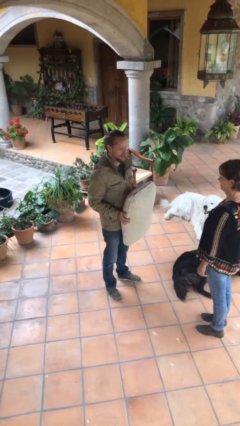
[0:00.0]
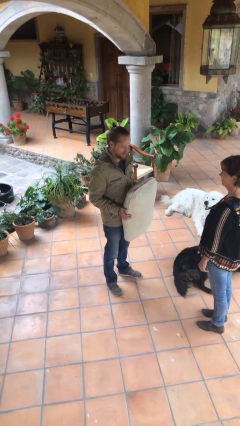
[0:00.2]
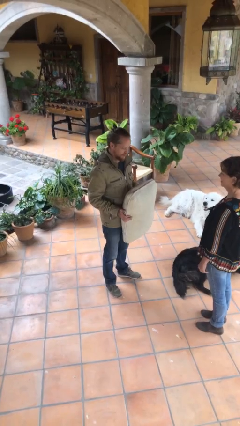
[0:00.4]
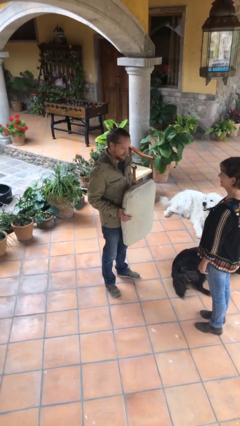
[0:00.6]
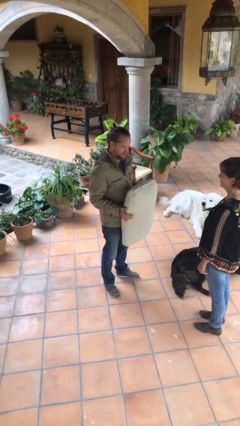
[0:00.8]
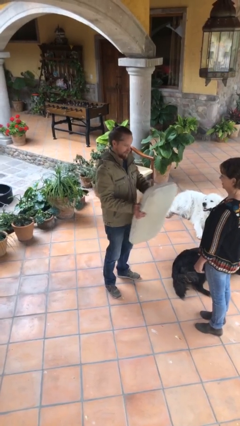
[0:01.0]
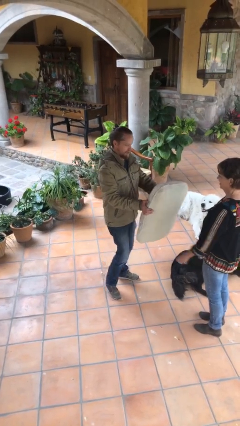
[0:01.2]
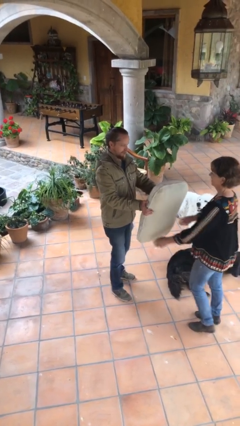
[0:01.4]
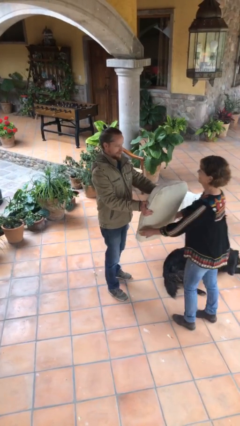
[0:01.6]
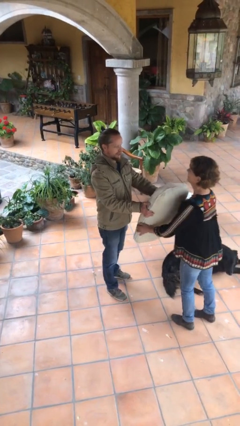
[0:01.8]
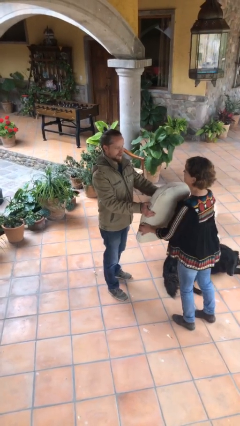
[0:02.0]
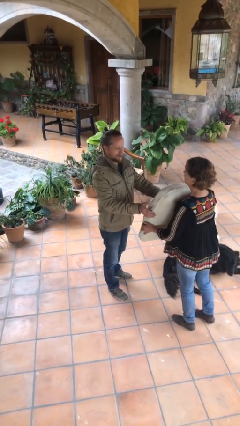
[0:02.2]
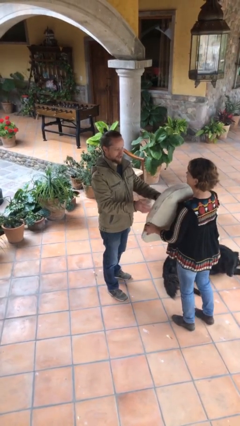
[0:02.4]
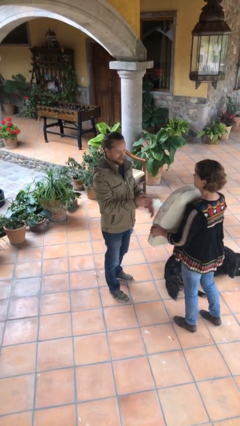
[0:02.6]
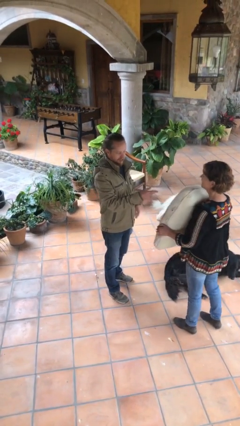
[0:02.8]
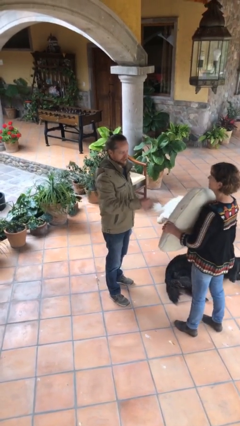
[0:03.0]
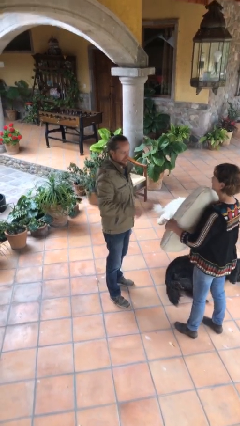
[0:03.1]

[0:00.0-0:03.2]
person transfers object to person

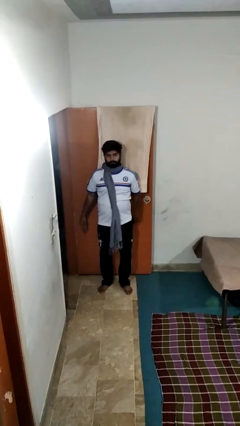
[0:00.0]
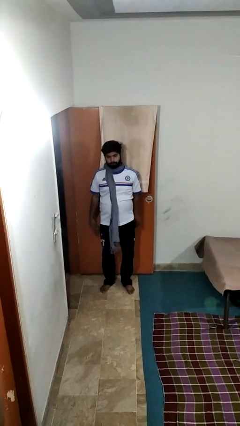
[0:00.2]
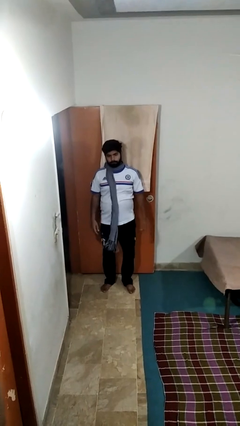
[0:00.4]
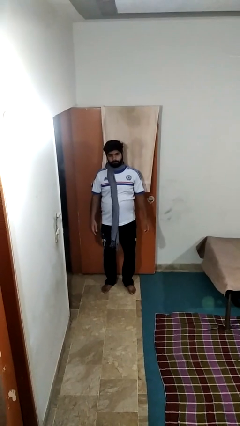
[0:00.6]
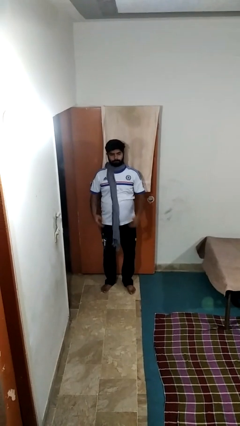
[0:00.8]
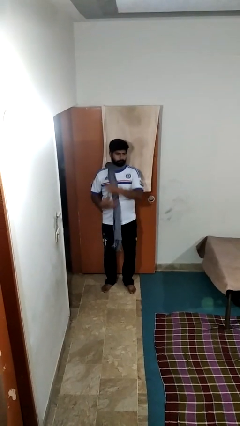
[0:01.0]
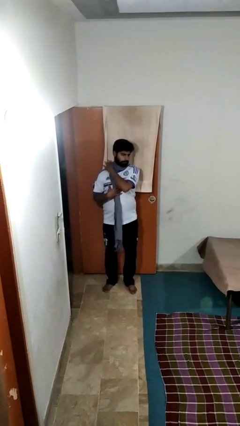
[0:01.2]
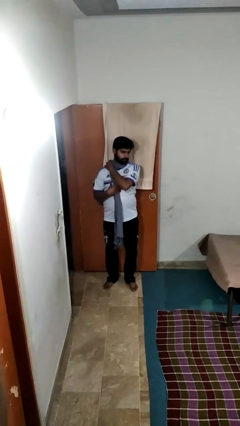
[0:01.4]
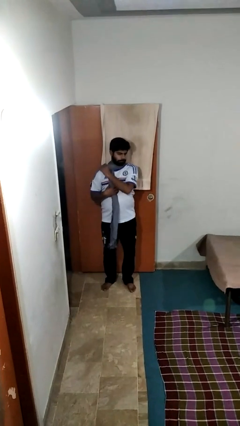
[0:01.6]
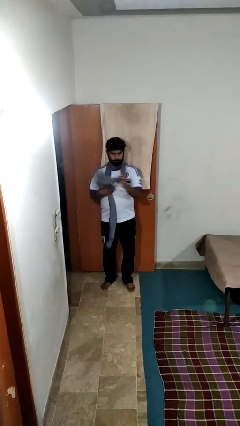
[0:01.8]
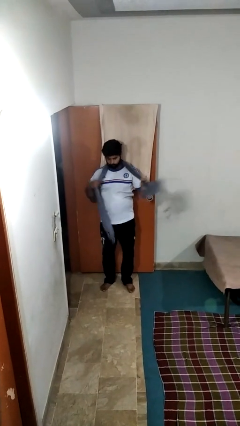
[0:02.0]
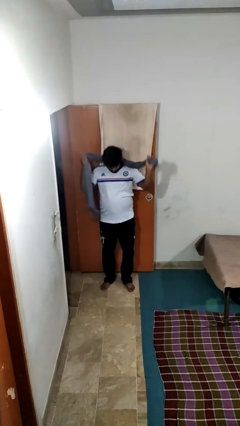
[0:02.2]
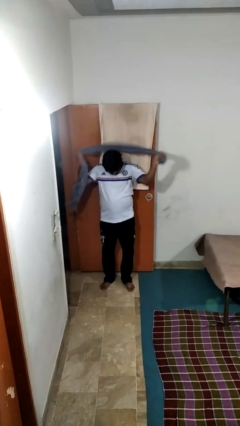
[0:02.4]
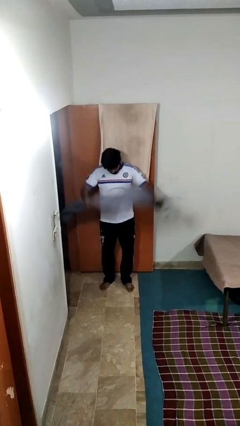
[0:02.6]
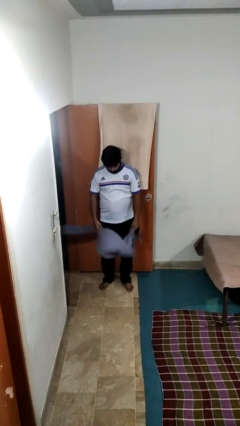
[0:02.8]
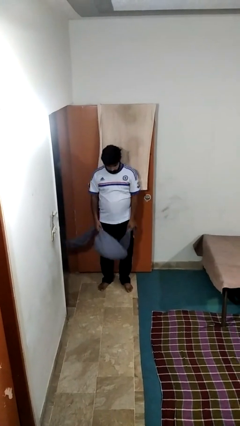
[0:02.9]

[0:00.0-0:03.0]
person takes off scarf

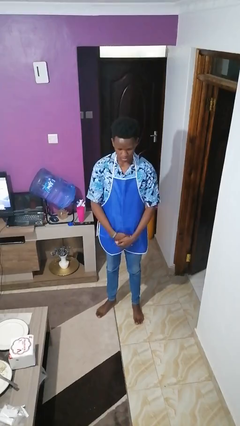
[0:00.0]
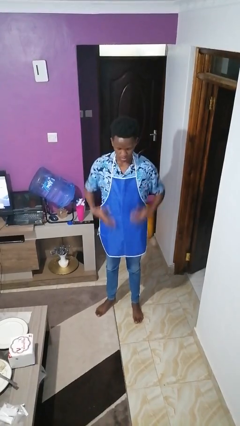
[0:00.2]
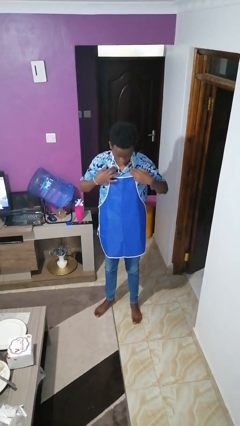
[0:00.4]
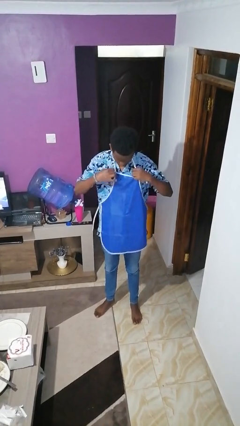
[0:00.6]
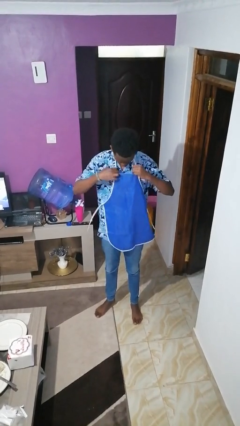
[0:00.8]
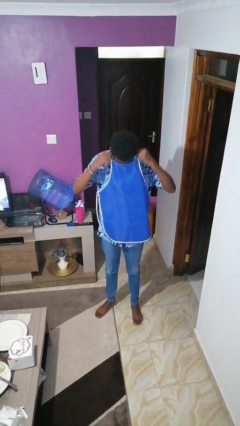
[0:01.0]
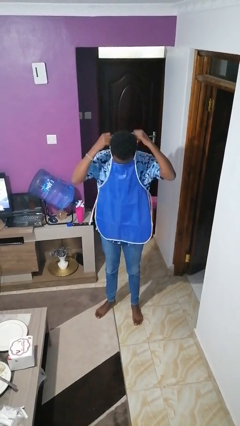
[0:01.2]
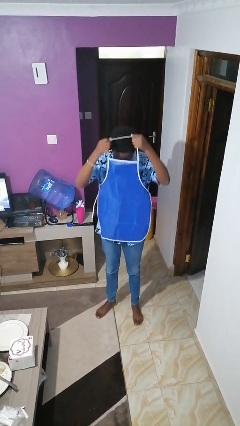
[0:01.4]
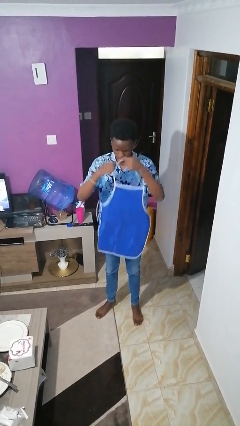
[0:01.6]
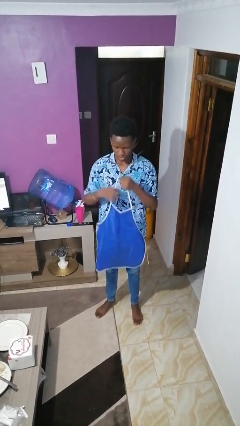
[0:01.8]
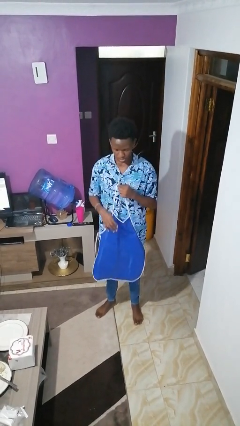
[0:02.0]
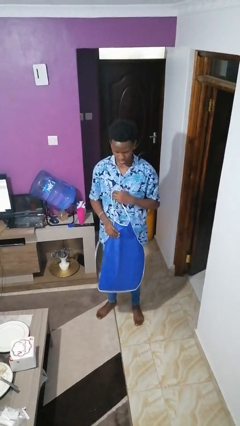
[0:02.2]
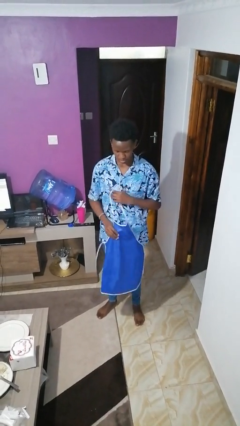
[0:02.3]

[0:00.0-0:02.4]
person takes off apron

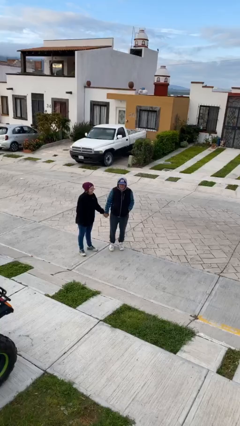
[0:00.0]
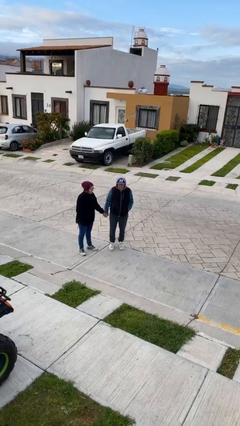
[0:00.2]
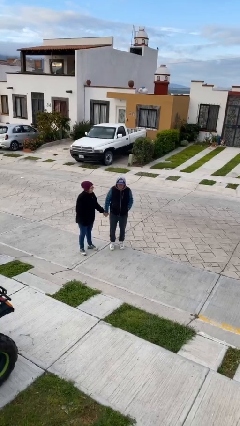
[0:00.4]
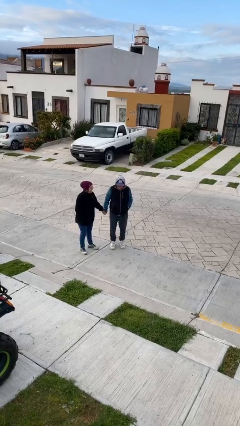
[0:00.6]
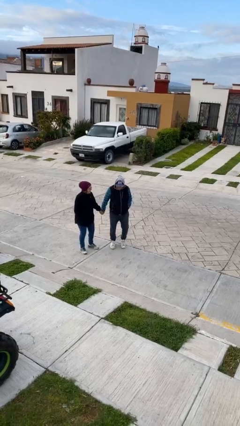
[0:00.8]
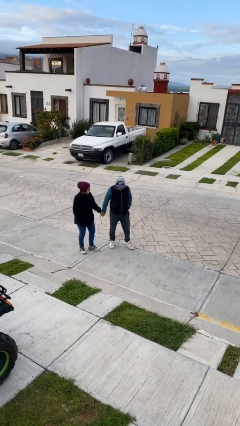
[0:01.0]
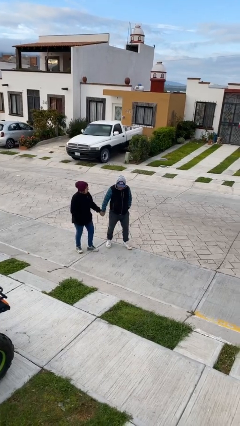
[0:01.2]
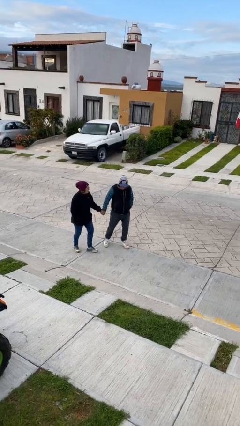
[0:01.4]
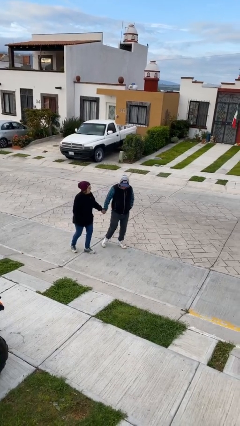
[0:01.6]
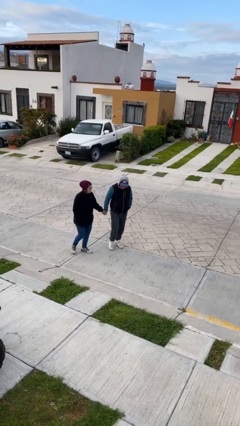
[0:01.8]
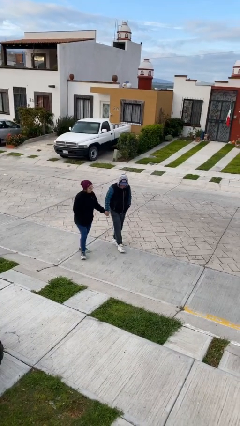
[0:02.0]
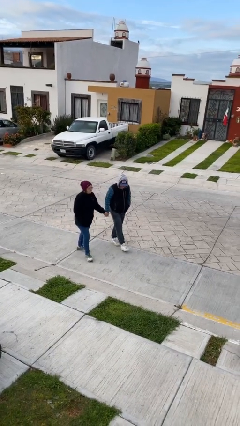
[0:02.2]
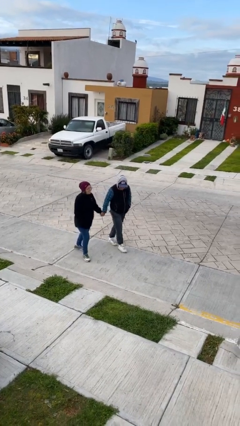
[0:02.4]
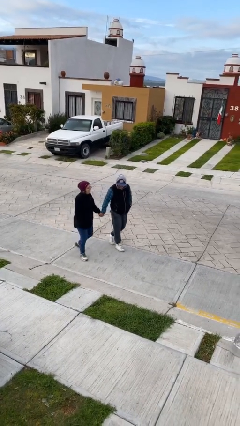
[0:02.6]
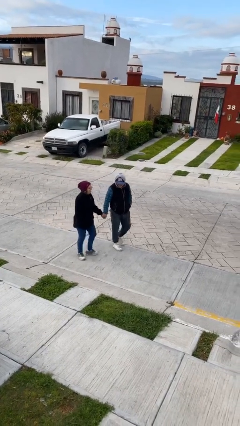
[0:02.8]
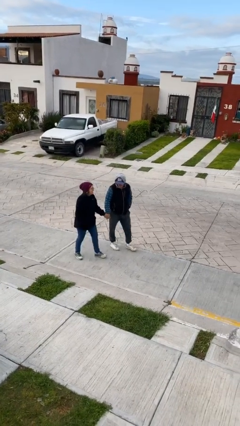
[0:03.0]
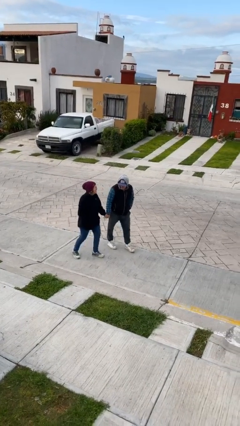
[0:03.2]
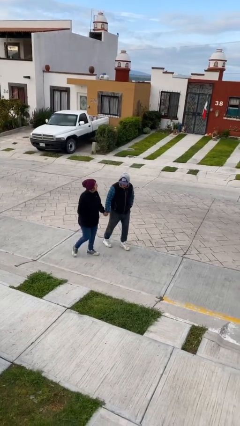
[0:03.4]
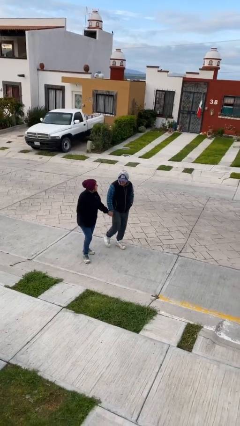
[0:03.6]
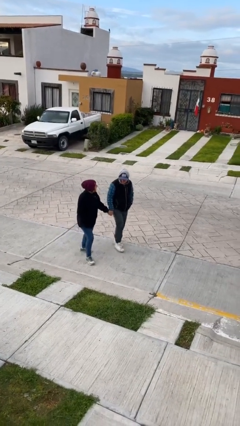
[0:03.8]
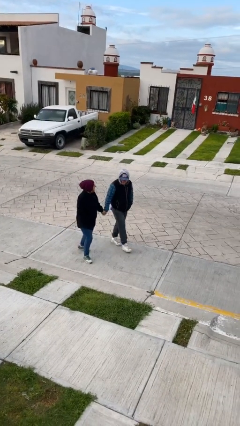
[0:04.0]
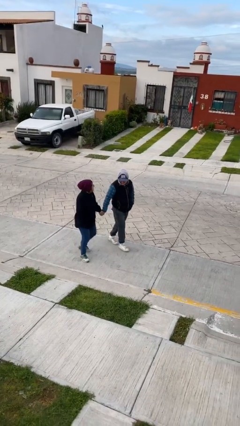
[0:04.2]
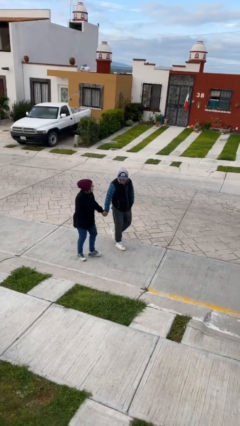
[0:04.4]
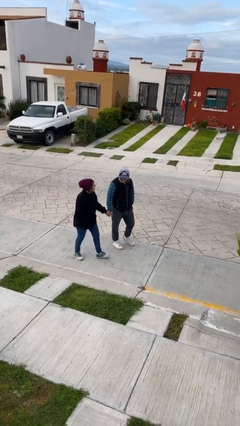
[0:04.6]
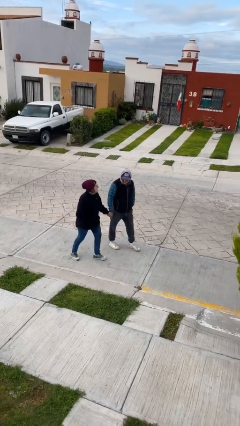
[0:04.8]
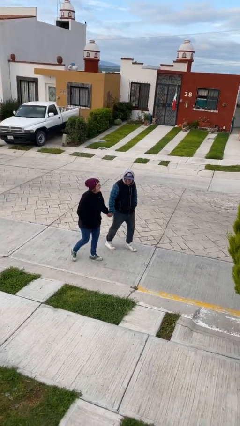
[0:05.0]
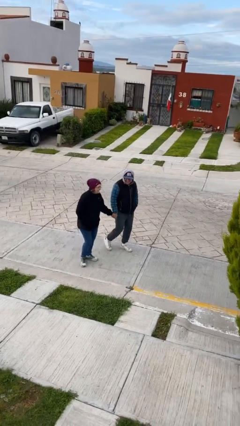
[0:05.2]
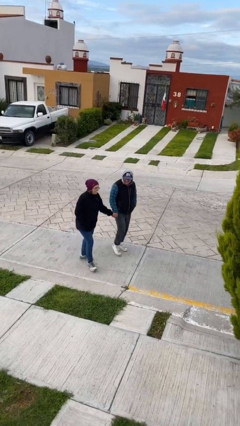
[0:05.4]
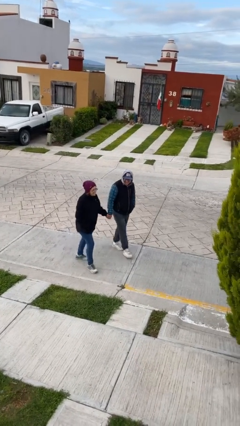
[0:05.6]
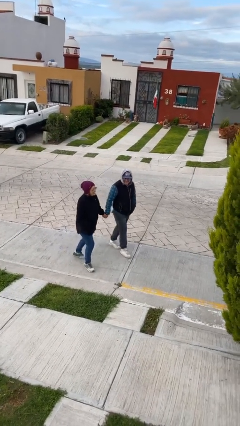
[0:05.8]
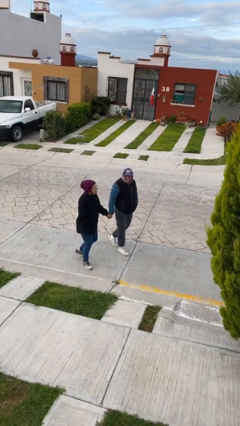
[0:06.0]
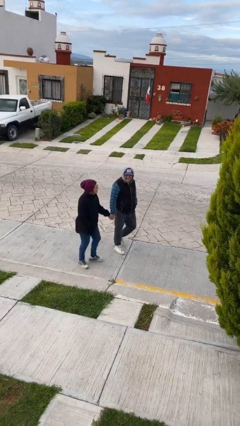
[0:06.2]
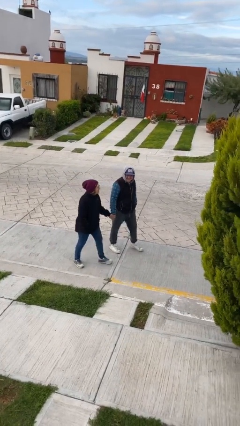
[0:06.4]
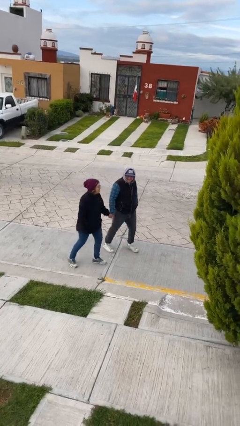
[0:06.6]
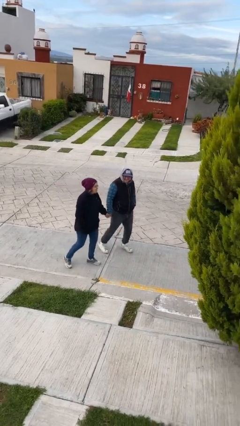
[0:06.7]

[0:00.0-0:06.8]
person holds hand

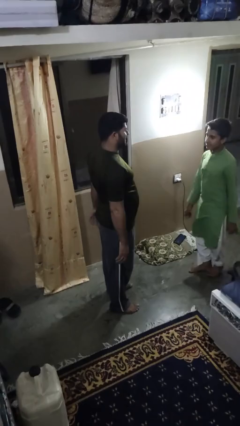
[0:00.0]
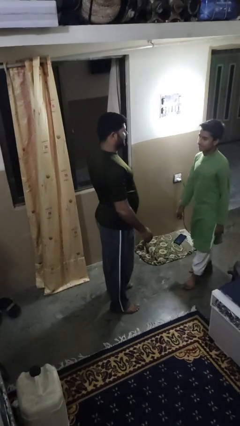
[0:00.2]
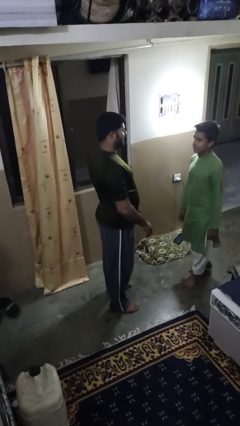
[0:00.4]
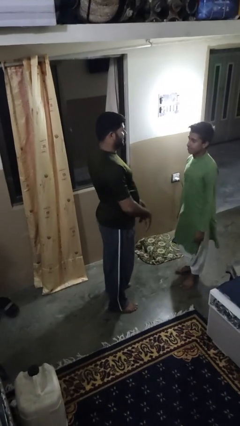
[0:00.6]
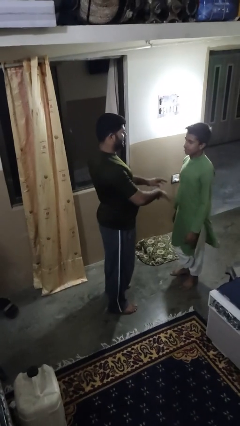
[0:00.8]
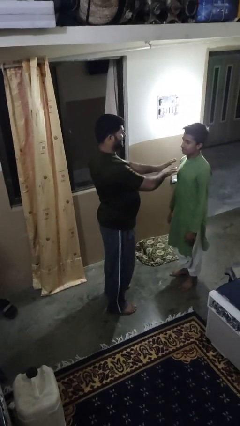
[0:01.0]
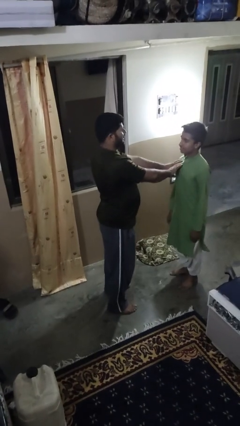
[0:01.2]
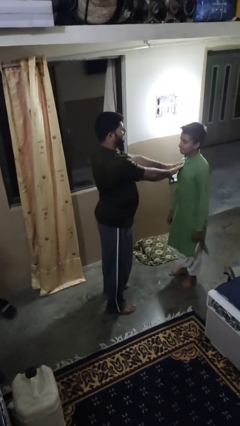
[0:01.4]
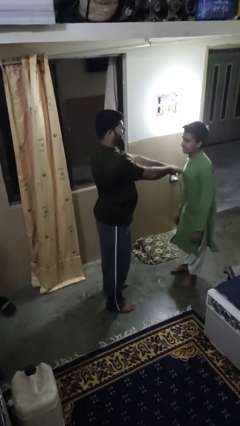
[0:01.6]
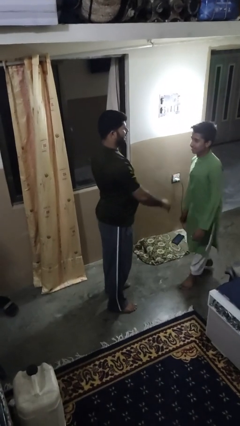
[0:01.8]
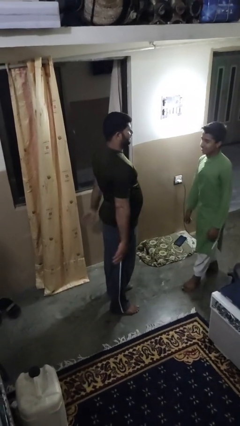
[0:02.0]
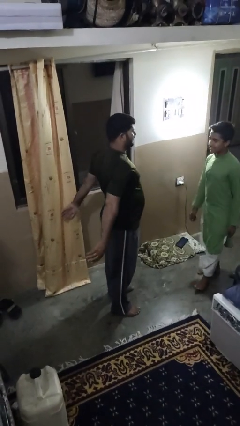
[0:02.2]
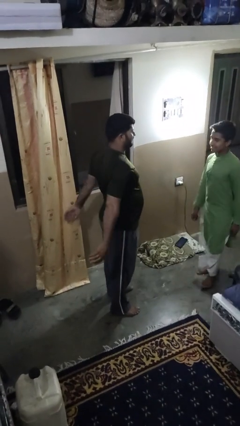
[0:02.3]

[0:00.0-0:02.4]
person shoves person
